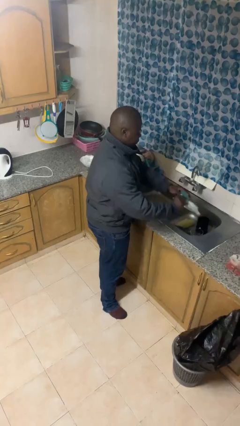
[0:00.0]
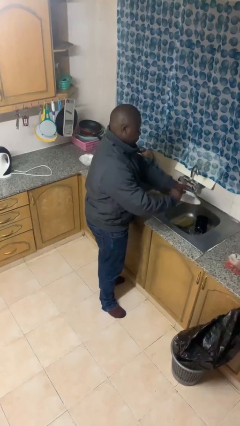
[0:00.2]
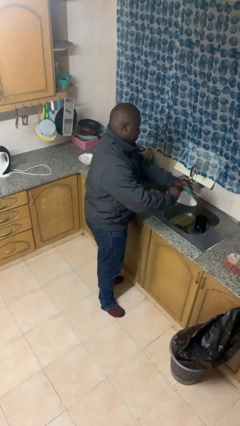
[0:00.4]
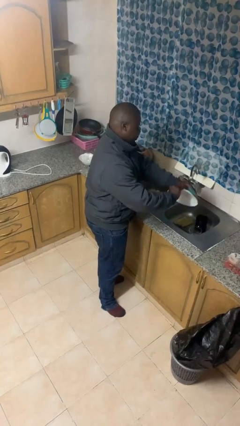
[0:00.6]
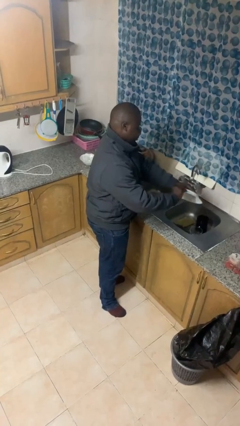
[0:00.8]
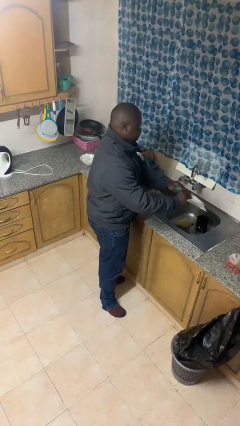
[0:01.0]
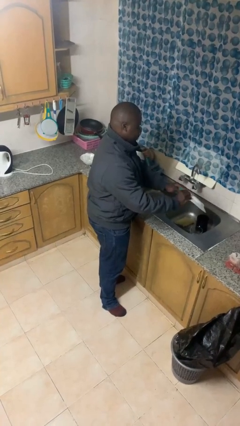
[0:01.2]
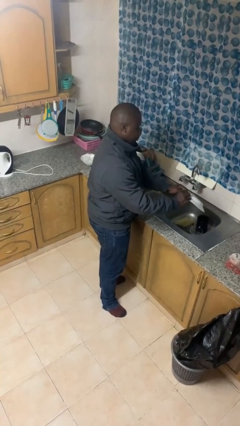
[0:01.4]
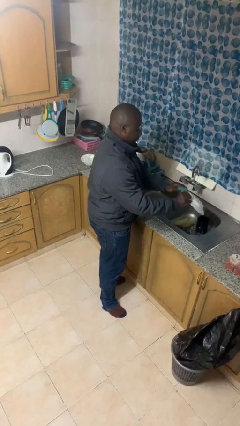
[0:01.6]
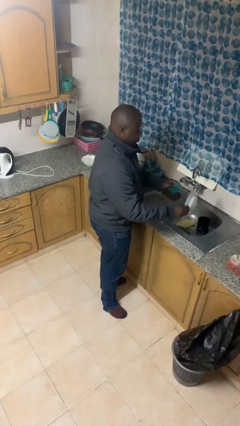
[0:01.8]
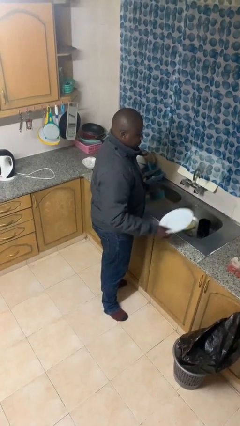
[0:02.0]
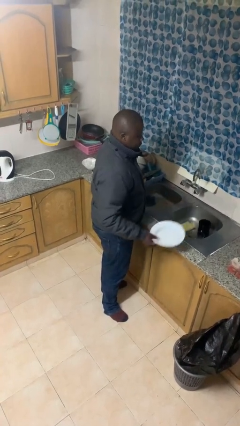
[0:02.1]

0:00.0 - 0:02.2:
person washes dish

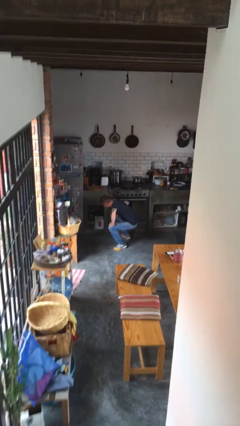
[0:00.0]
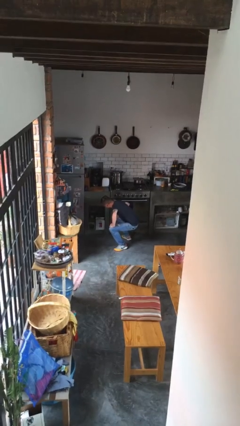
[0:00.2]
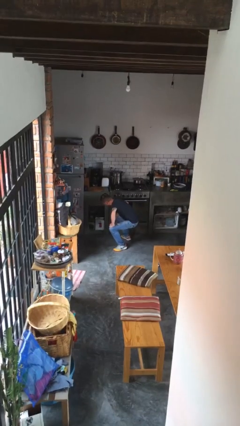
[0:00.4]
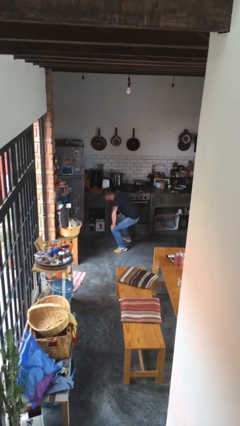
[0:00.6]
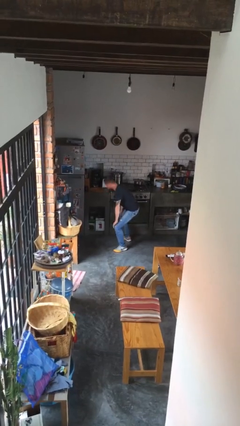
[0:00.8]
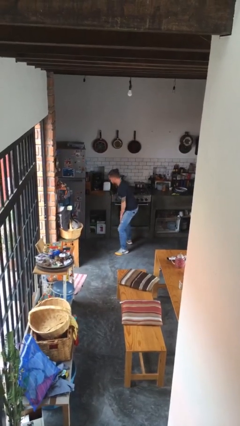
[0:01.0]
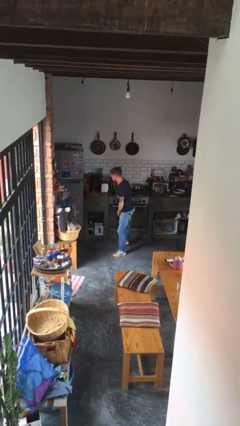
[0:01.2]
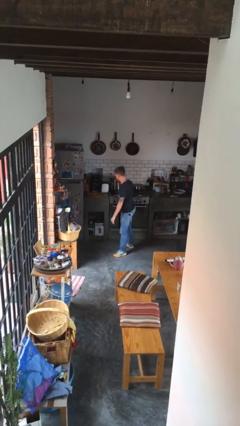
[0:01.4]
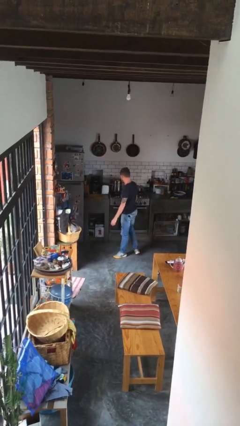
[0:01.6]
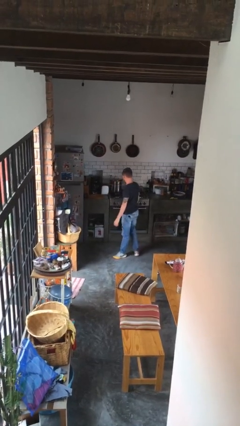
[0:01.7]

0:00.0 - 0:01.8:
person stands up

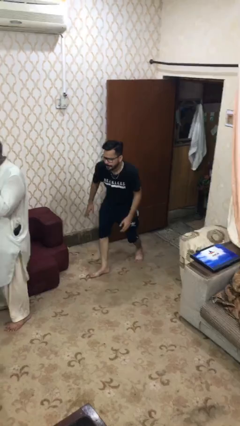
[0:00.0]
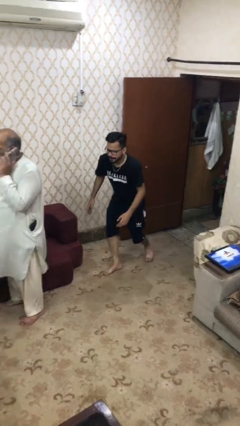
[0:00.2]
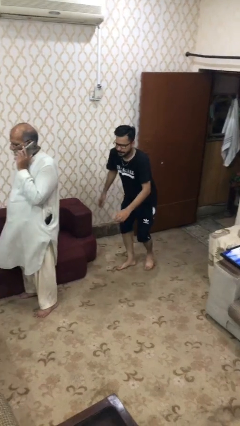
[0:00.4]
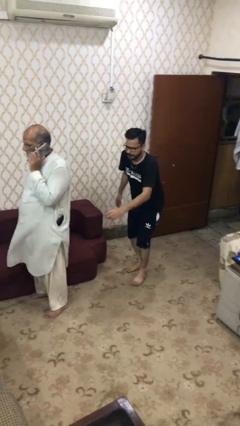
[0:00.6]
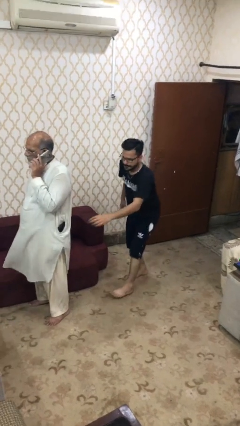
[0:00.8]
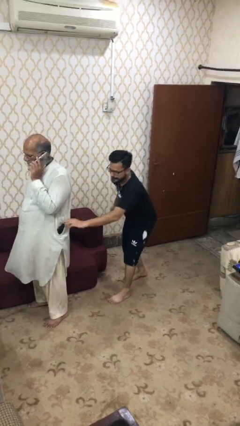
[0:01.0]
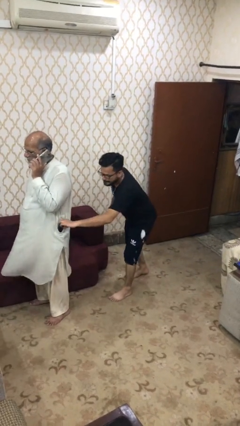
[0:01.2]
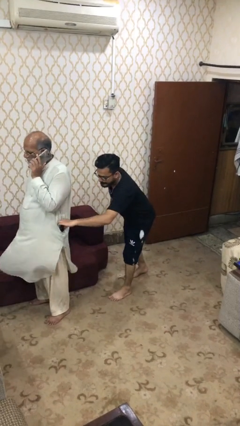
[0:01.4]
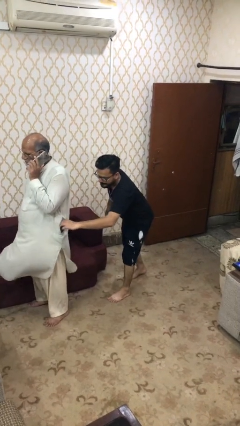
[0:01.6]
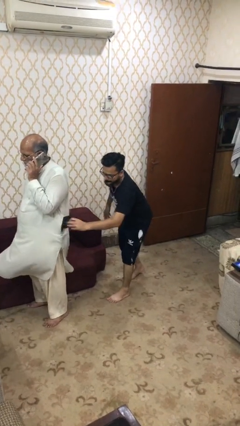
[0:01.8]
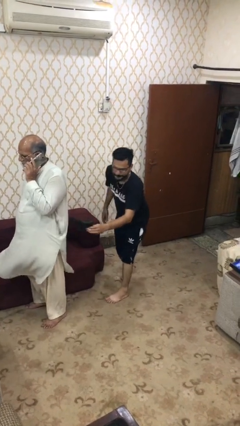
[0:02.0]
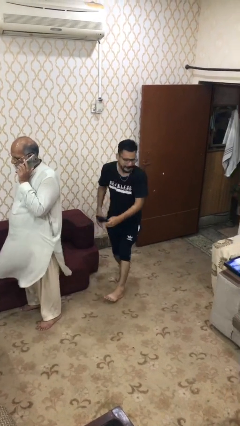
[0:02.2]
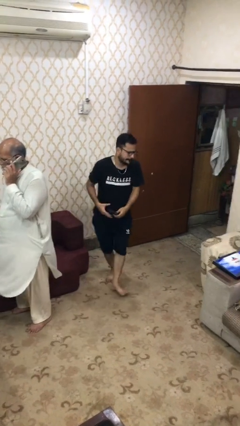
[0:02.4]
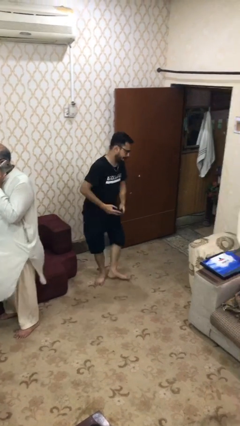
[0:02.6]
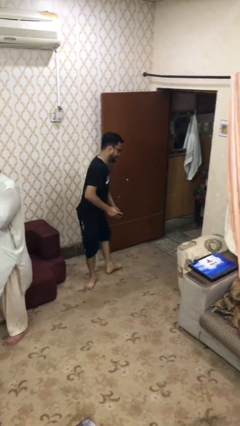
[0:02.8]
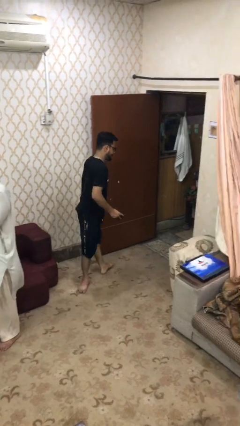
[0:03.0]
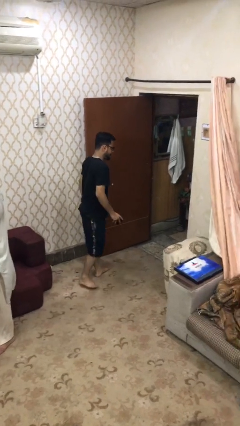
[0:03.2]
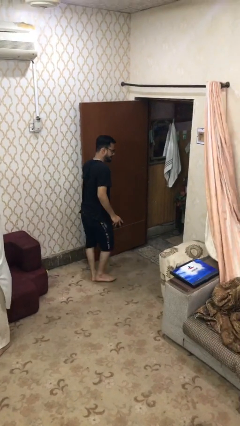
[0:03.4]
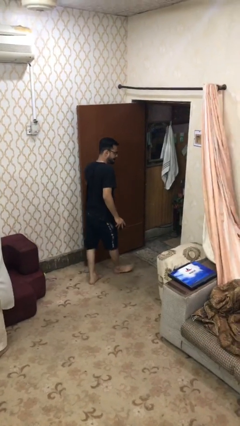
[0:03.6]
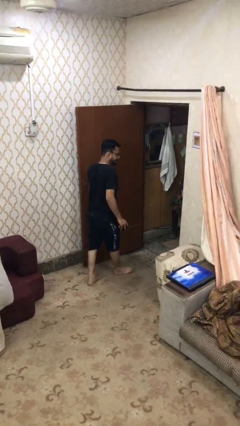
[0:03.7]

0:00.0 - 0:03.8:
person steals object from person

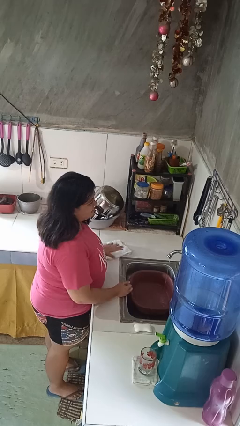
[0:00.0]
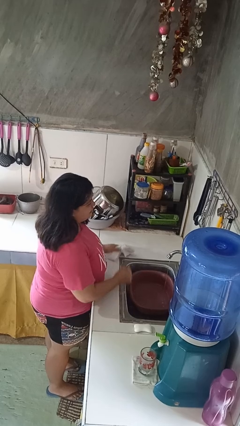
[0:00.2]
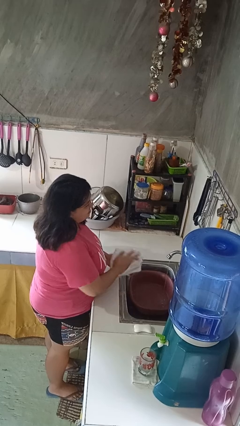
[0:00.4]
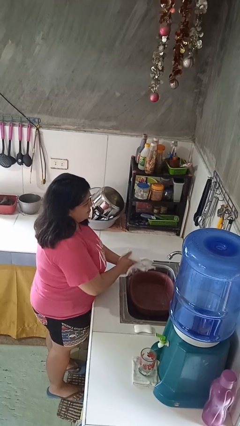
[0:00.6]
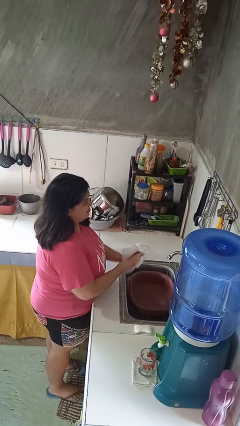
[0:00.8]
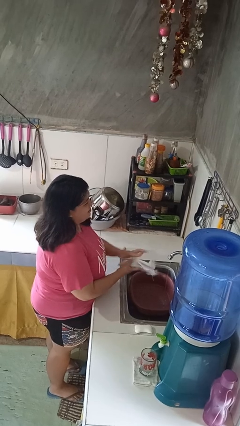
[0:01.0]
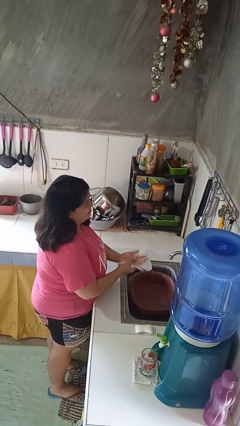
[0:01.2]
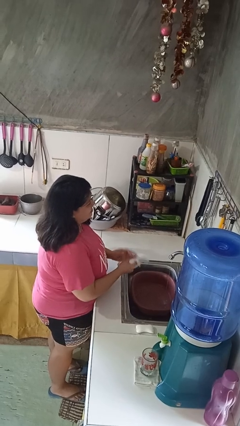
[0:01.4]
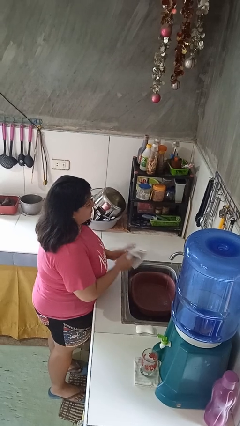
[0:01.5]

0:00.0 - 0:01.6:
person dries hands with towel

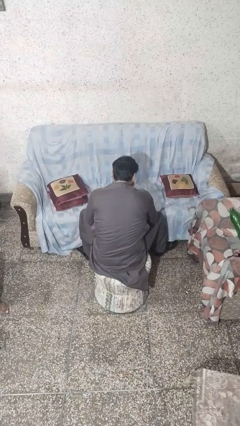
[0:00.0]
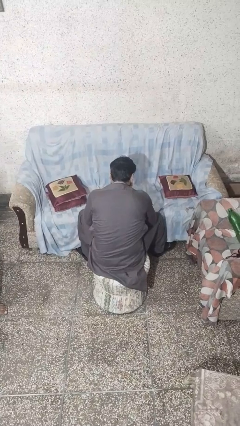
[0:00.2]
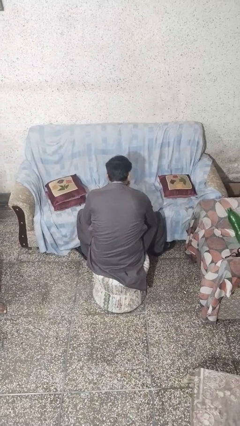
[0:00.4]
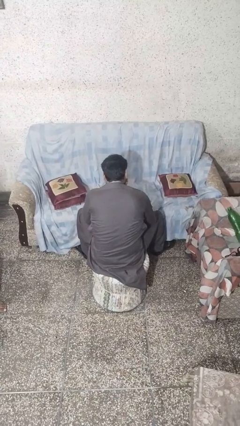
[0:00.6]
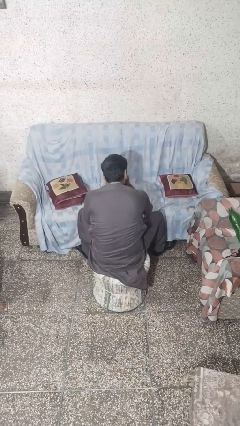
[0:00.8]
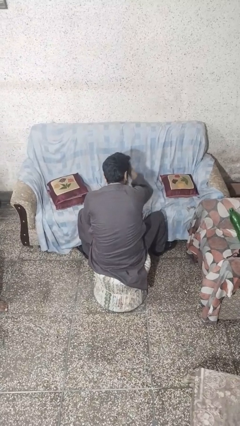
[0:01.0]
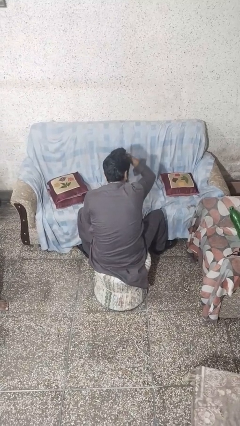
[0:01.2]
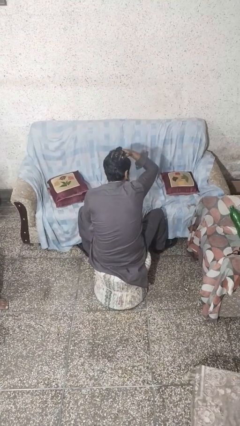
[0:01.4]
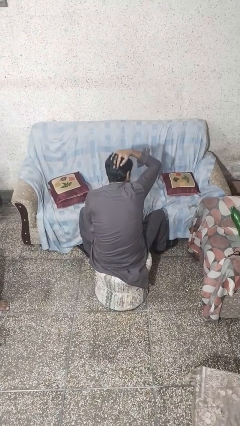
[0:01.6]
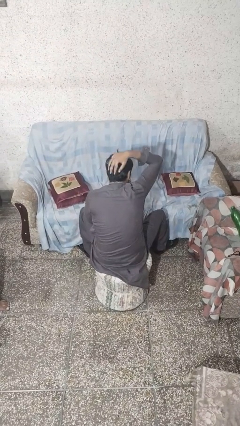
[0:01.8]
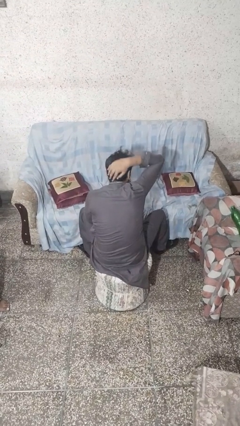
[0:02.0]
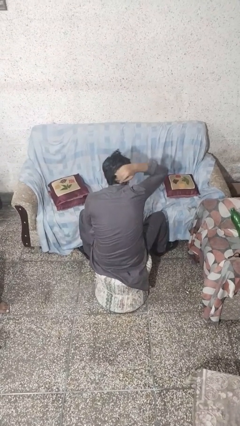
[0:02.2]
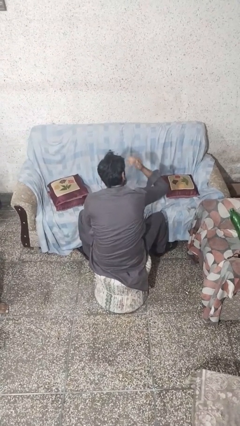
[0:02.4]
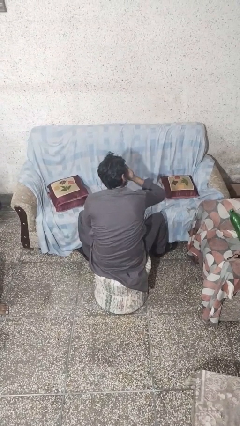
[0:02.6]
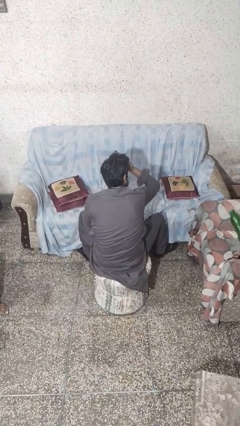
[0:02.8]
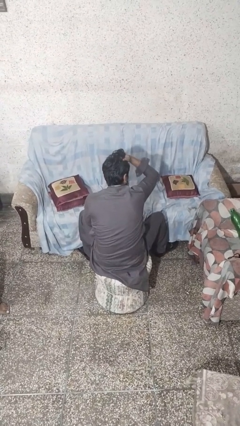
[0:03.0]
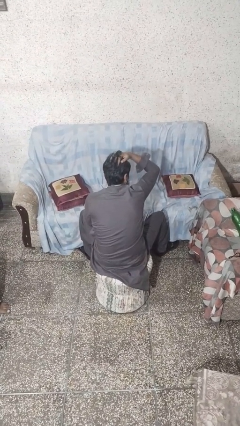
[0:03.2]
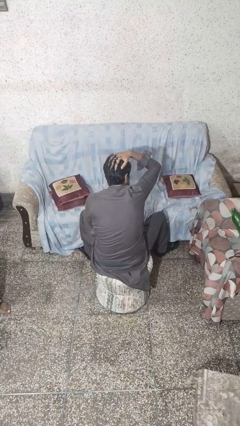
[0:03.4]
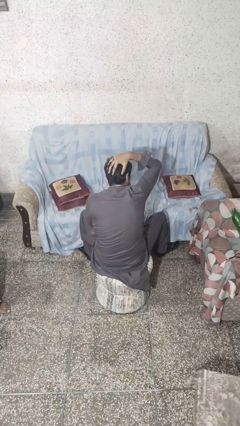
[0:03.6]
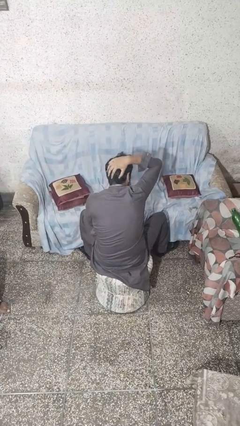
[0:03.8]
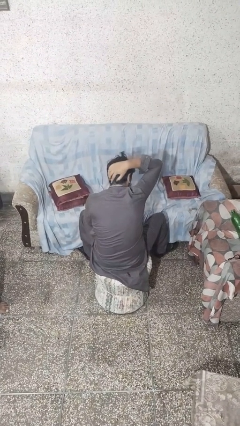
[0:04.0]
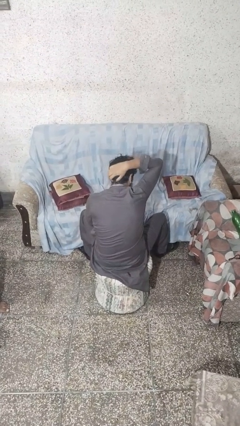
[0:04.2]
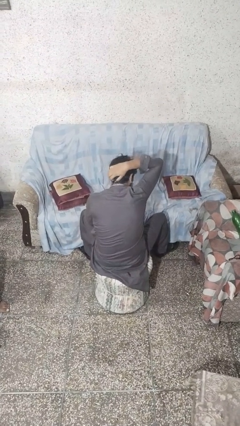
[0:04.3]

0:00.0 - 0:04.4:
person strokes hair

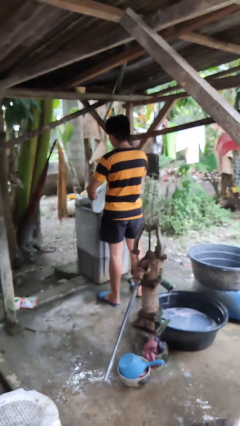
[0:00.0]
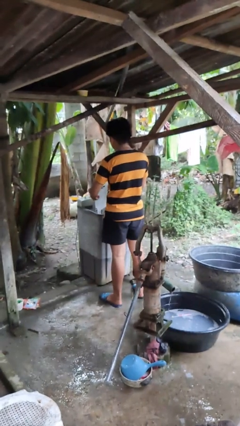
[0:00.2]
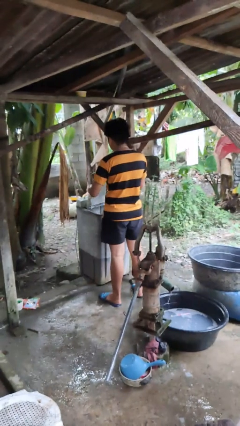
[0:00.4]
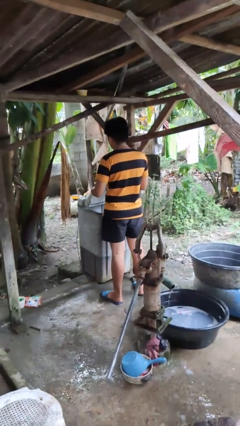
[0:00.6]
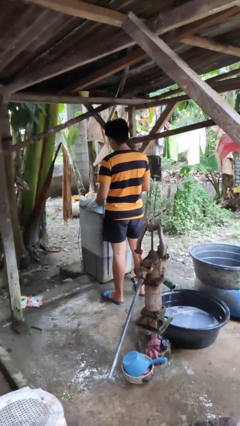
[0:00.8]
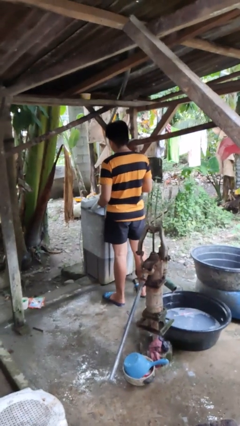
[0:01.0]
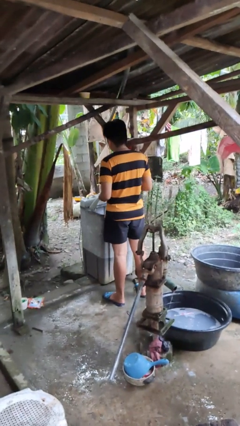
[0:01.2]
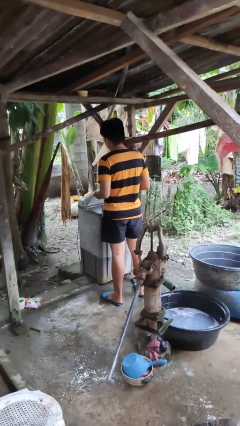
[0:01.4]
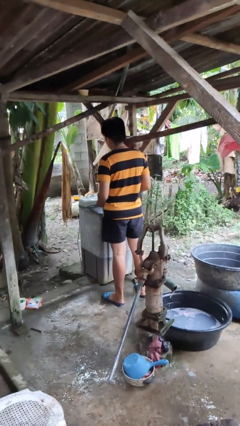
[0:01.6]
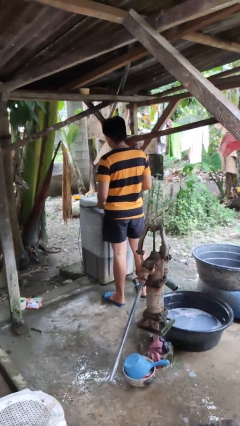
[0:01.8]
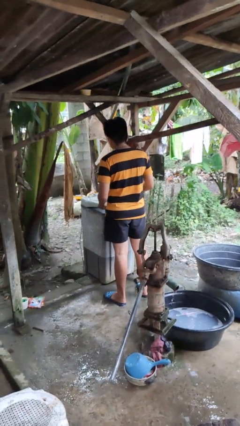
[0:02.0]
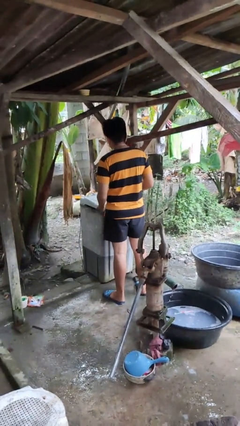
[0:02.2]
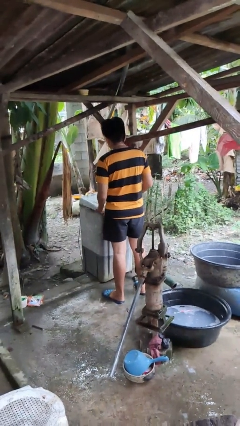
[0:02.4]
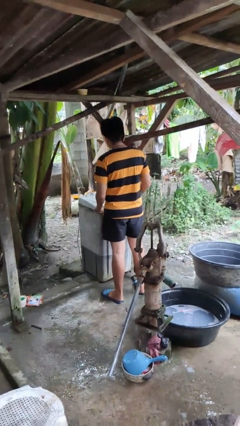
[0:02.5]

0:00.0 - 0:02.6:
person closes clothes washer

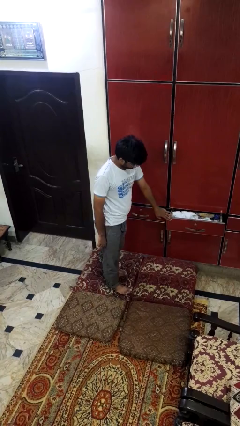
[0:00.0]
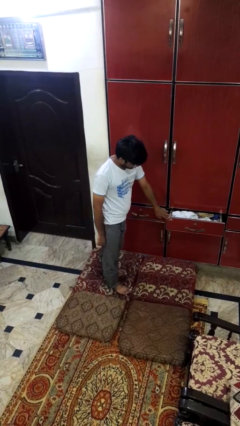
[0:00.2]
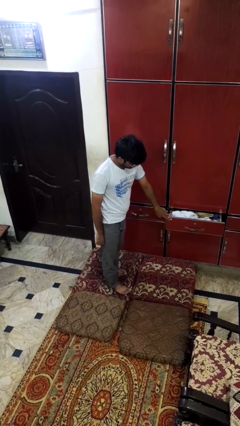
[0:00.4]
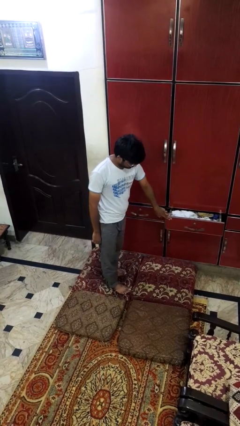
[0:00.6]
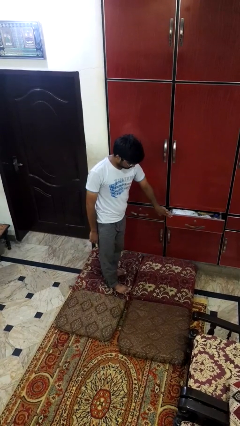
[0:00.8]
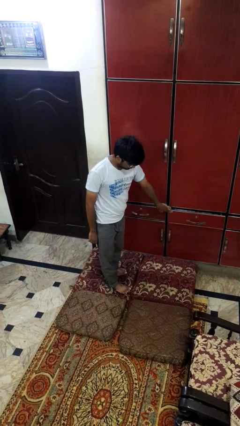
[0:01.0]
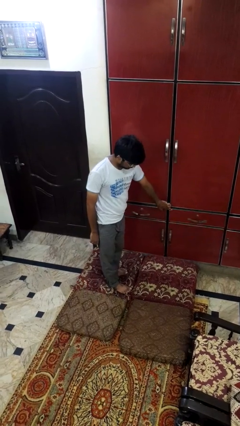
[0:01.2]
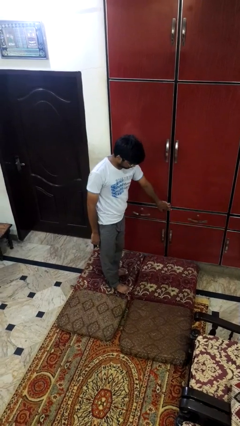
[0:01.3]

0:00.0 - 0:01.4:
person closes dresser drawer
